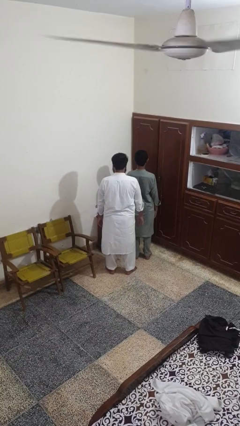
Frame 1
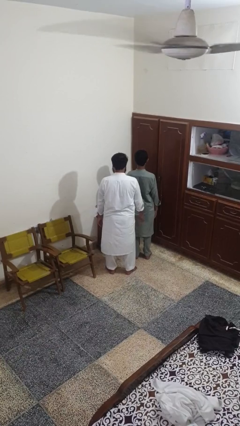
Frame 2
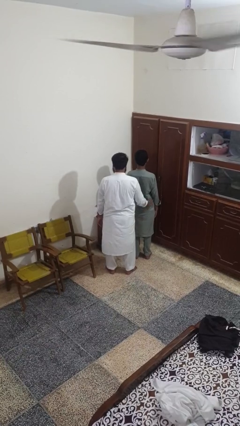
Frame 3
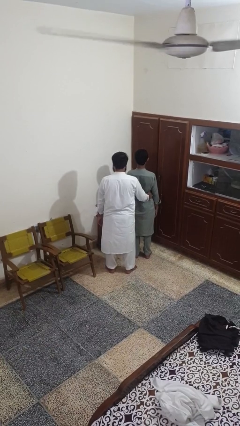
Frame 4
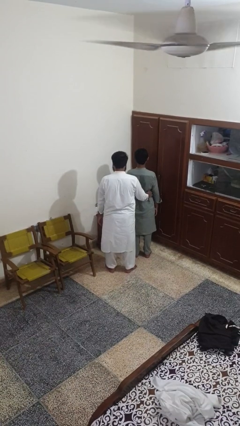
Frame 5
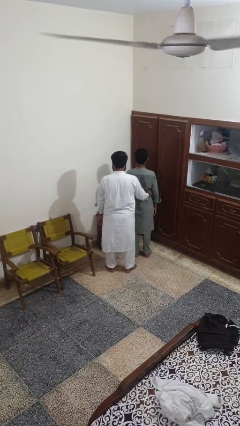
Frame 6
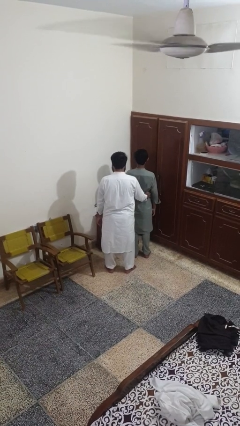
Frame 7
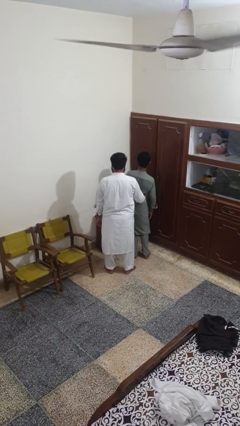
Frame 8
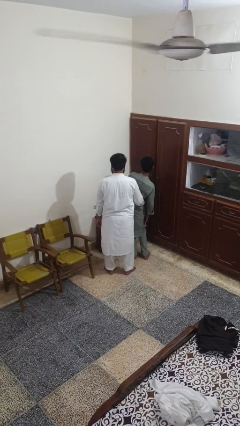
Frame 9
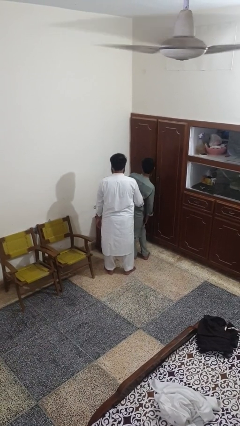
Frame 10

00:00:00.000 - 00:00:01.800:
person tickles person

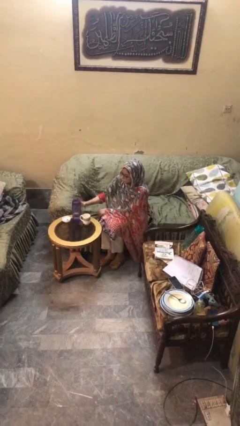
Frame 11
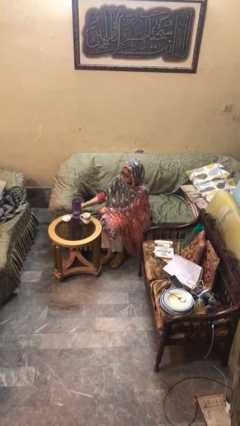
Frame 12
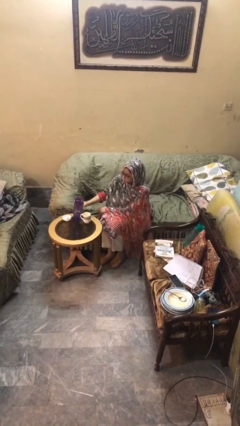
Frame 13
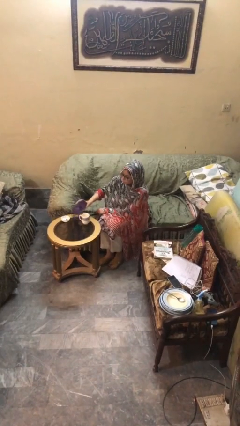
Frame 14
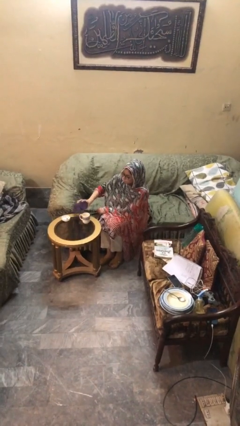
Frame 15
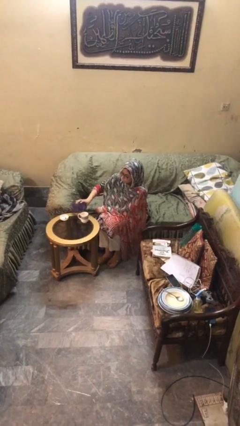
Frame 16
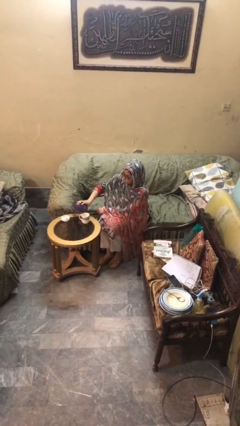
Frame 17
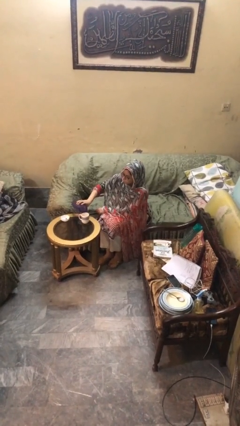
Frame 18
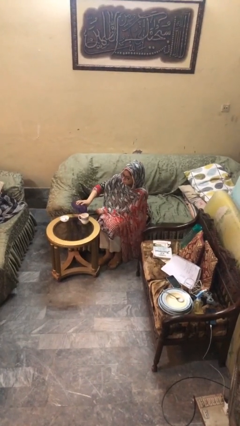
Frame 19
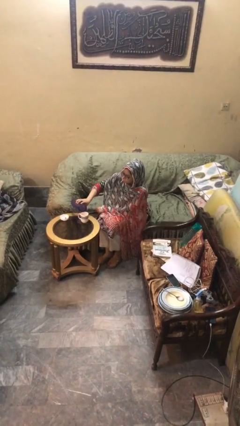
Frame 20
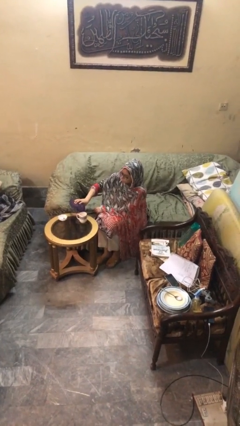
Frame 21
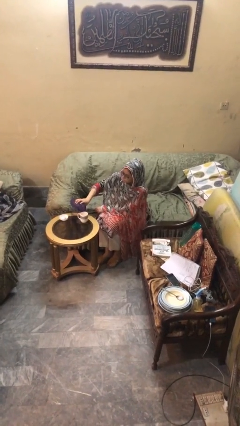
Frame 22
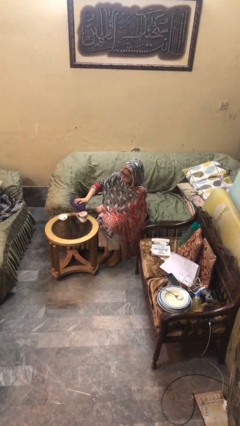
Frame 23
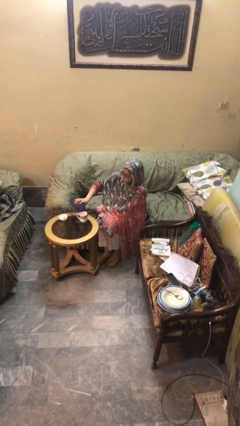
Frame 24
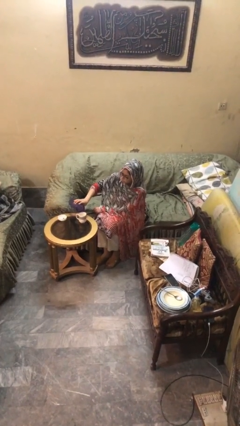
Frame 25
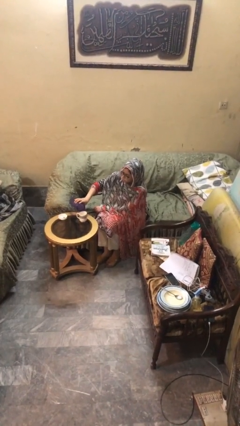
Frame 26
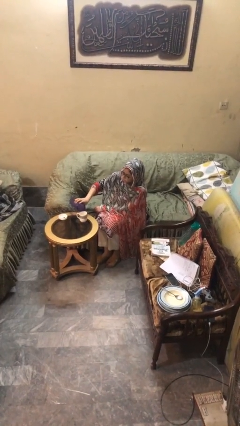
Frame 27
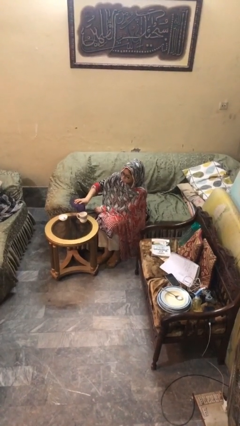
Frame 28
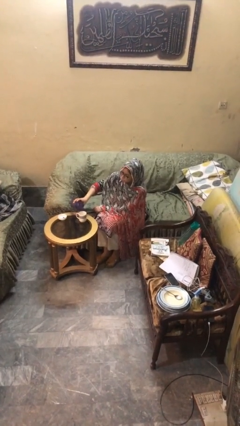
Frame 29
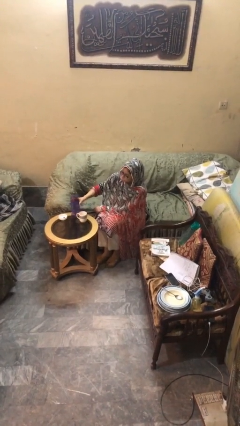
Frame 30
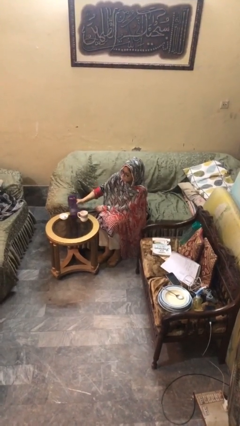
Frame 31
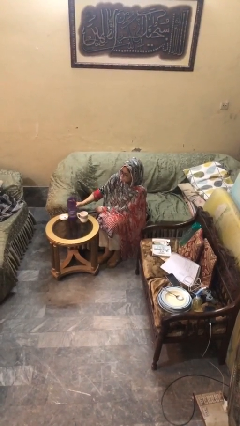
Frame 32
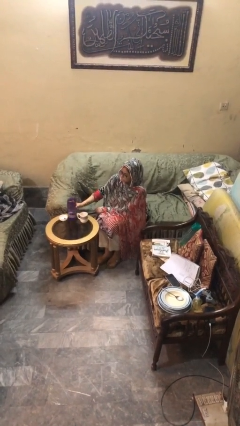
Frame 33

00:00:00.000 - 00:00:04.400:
person pours liquid into cup

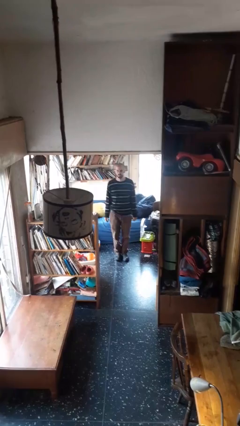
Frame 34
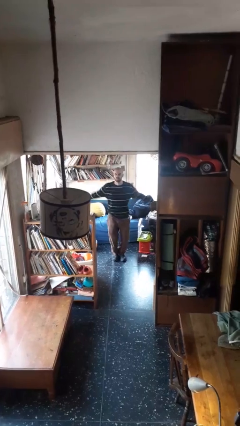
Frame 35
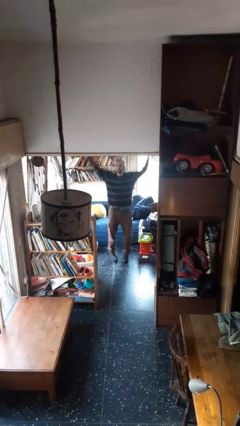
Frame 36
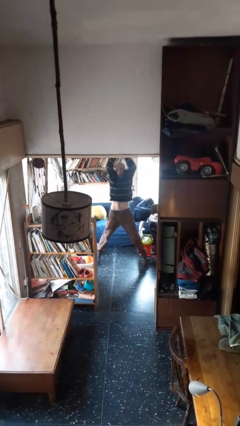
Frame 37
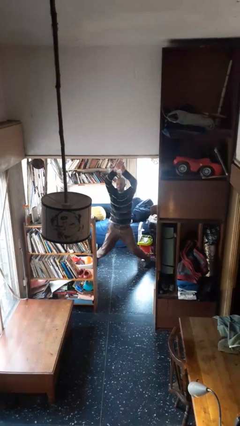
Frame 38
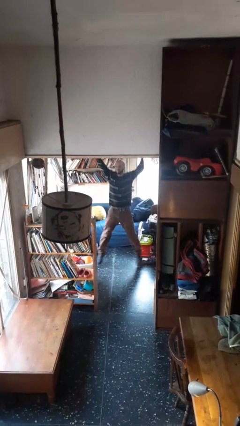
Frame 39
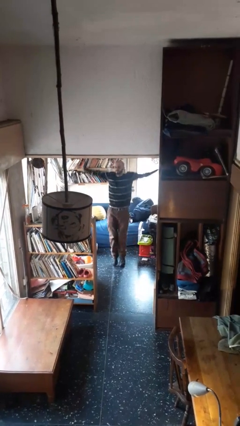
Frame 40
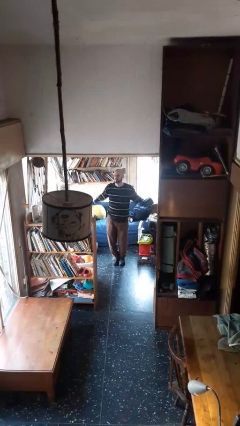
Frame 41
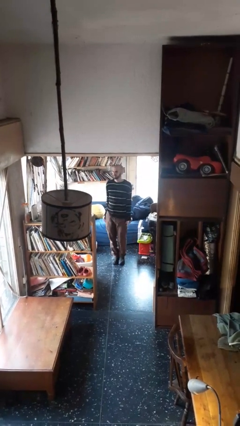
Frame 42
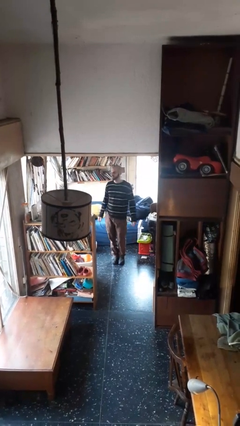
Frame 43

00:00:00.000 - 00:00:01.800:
person exercises with jumping jacks

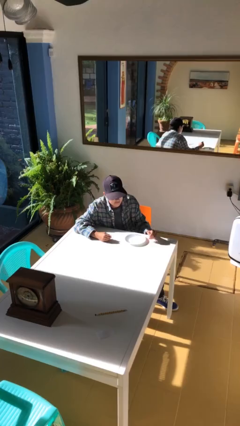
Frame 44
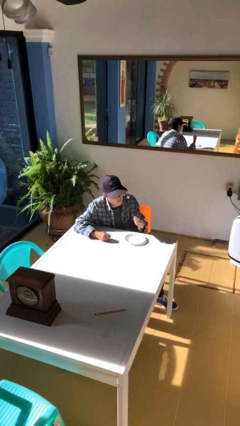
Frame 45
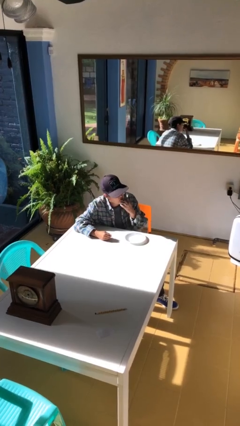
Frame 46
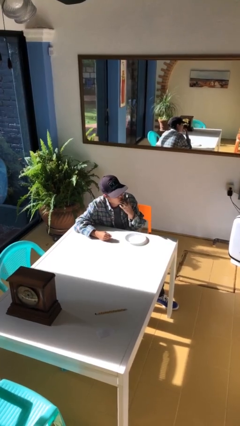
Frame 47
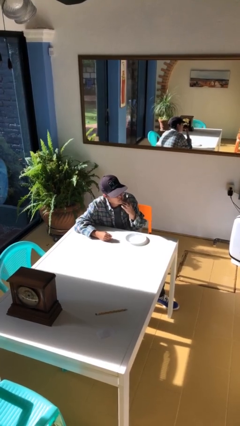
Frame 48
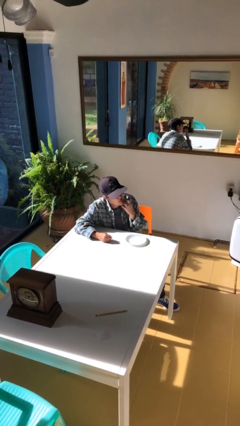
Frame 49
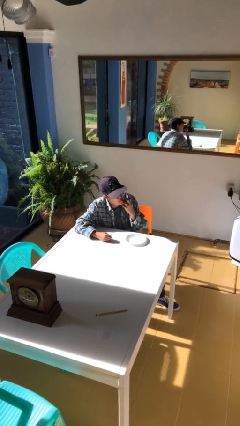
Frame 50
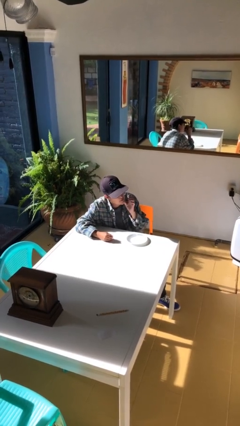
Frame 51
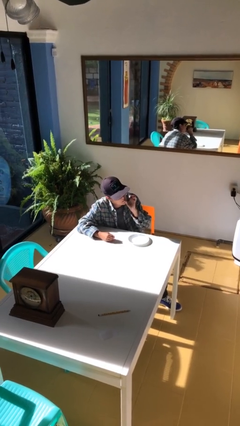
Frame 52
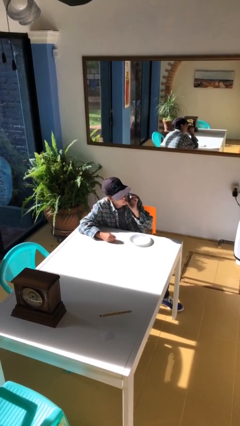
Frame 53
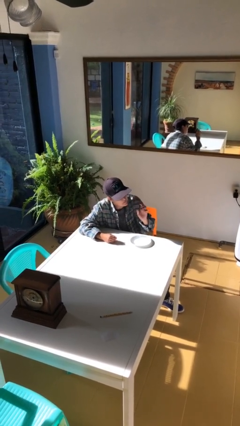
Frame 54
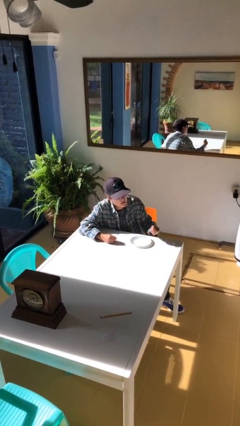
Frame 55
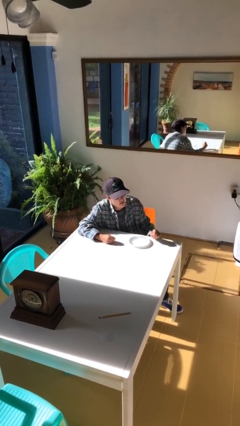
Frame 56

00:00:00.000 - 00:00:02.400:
person licks fingers

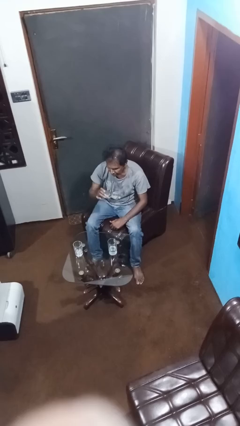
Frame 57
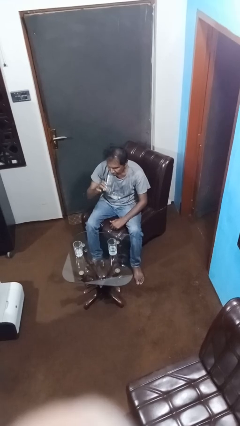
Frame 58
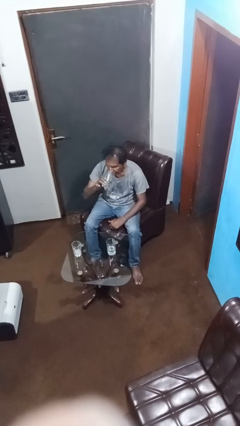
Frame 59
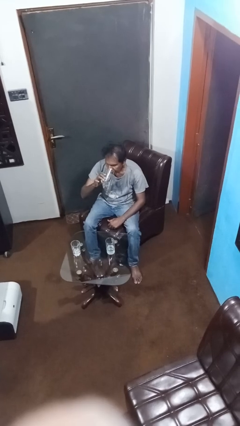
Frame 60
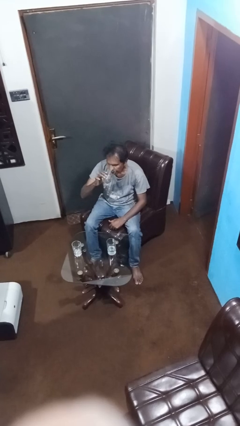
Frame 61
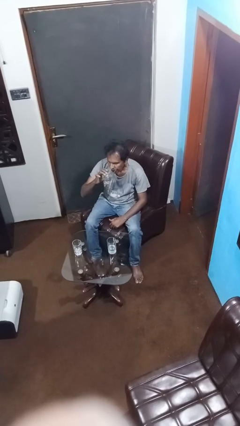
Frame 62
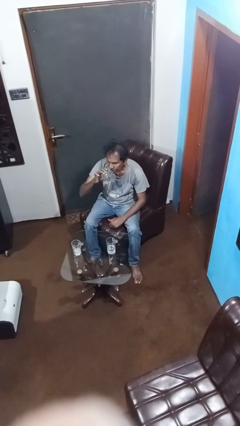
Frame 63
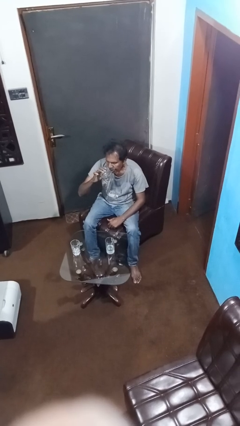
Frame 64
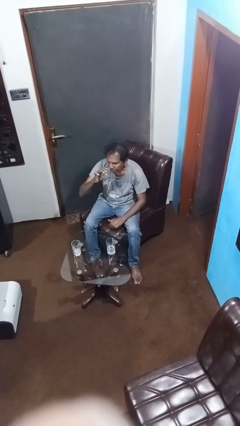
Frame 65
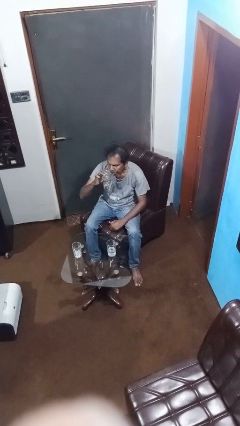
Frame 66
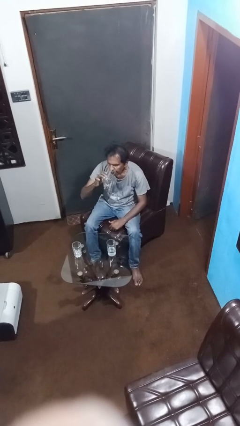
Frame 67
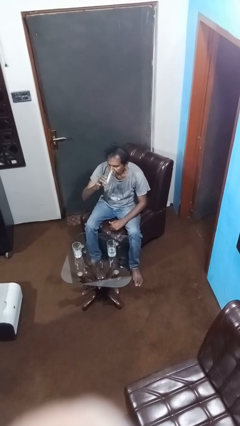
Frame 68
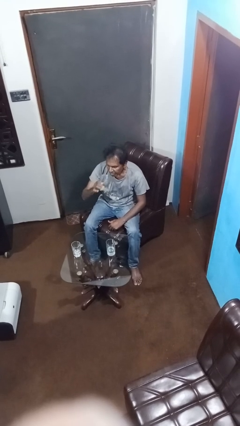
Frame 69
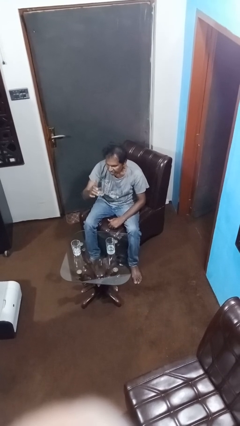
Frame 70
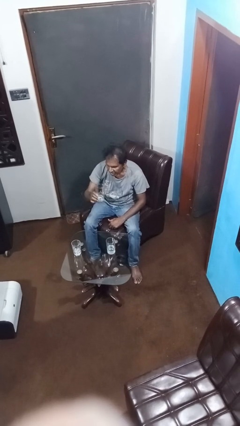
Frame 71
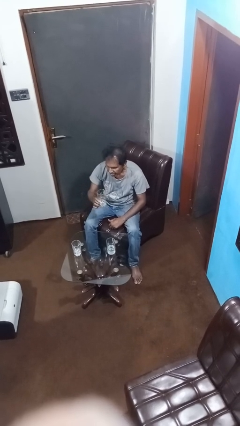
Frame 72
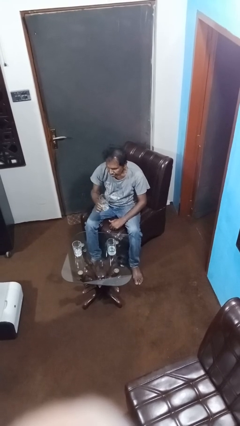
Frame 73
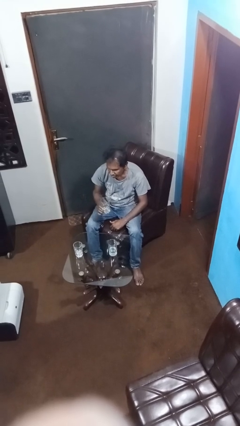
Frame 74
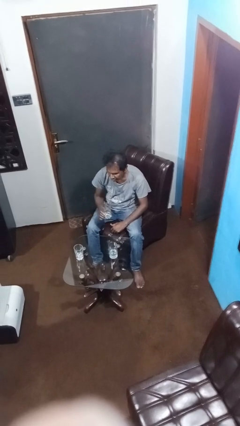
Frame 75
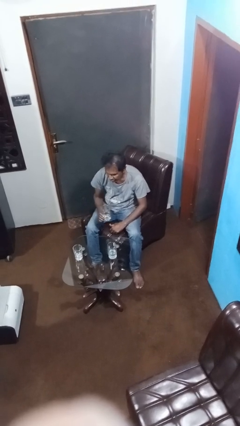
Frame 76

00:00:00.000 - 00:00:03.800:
person drinks from shotglass

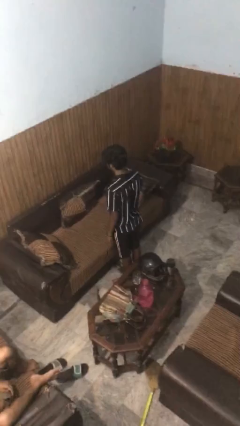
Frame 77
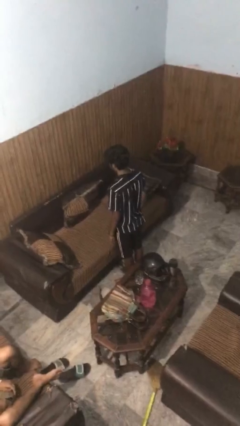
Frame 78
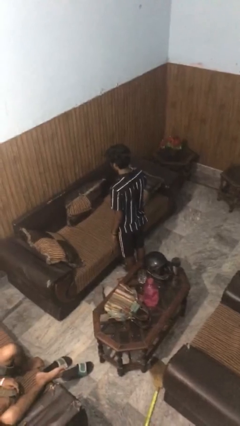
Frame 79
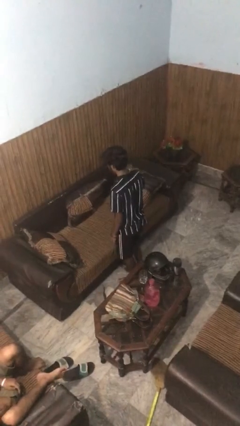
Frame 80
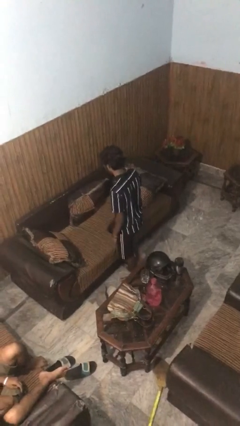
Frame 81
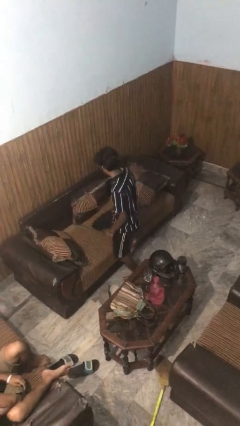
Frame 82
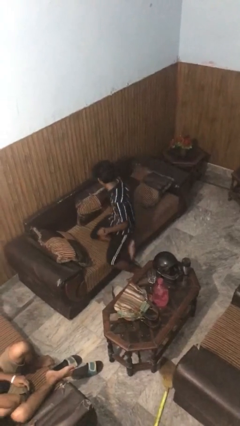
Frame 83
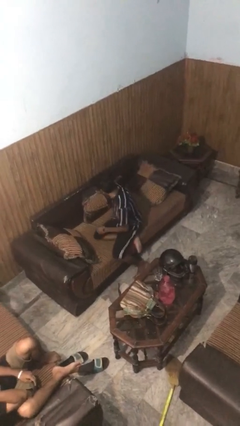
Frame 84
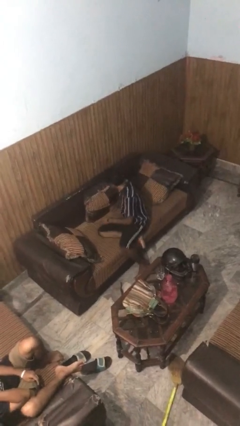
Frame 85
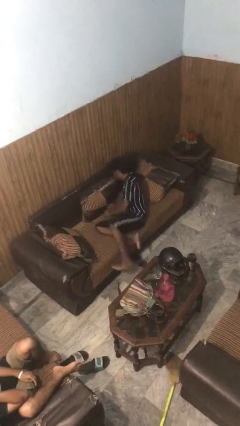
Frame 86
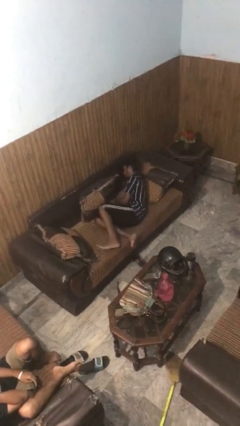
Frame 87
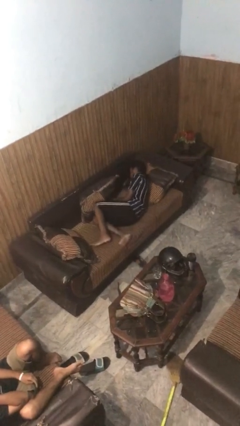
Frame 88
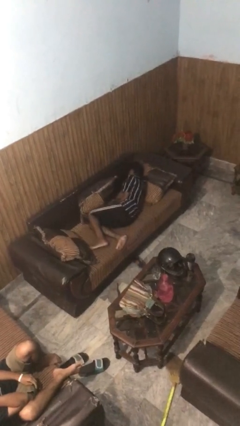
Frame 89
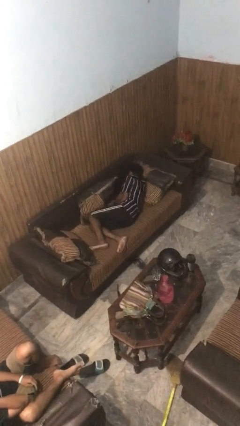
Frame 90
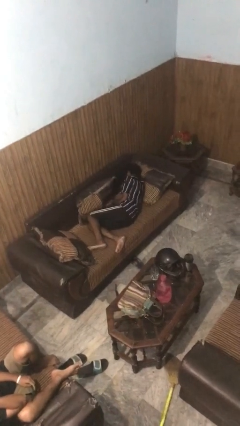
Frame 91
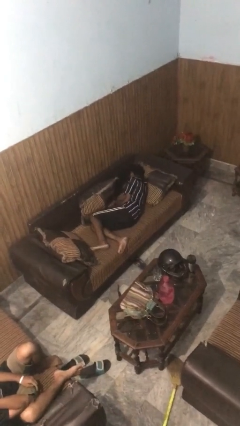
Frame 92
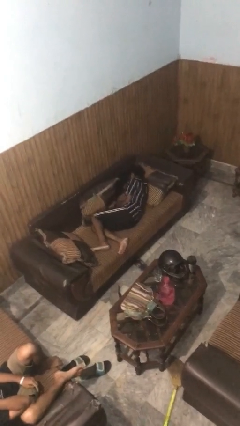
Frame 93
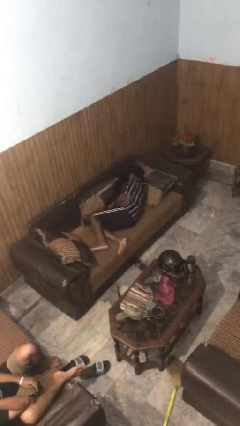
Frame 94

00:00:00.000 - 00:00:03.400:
person lies down on couch

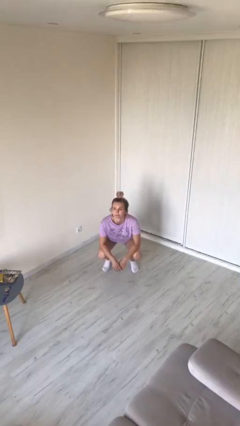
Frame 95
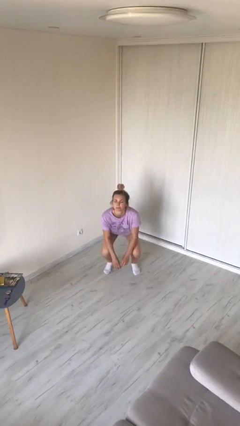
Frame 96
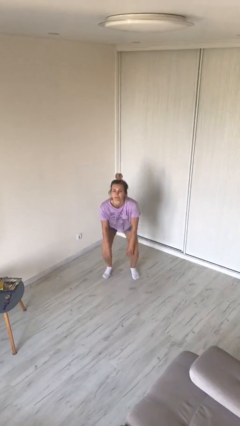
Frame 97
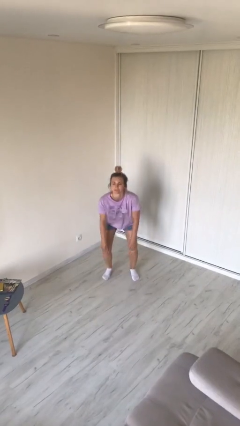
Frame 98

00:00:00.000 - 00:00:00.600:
person stands up
